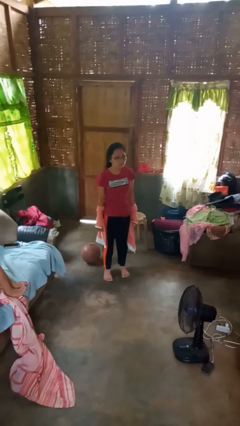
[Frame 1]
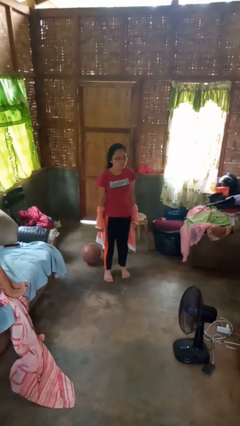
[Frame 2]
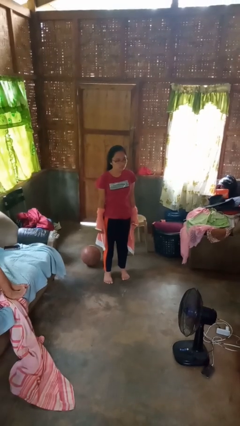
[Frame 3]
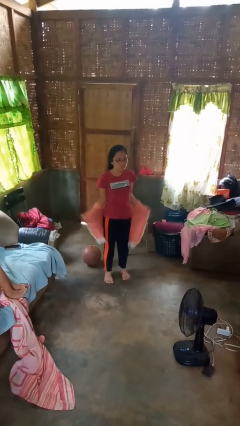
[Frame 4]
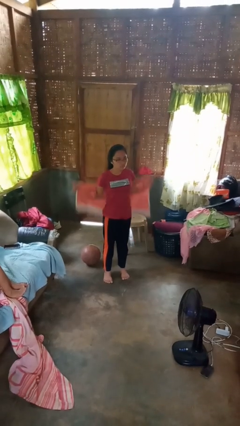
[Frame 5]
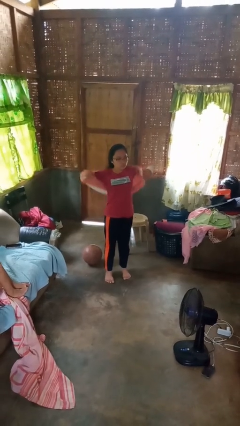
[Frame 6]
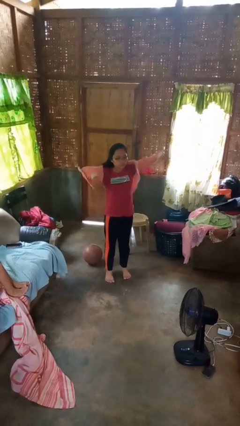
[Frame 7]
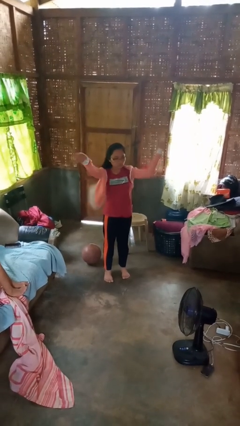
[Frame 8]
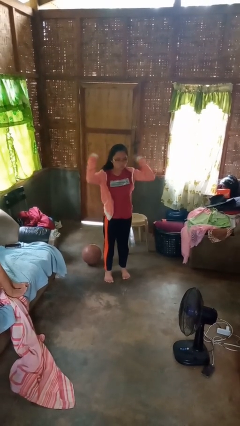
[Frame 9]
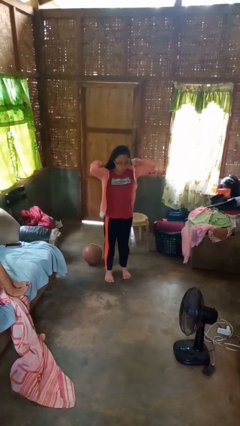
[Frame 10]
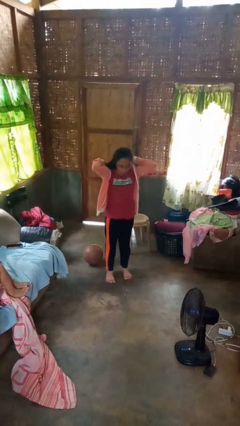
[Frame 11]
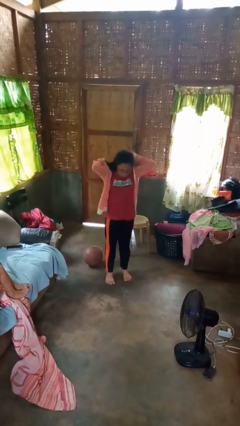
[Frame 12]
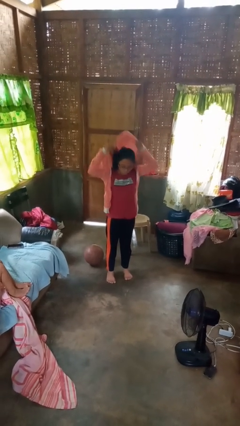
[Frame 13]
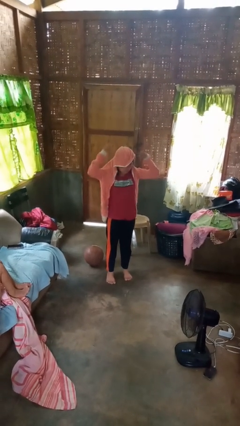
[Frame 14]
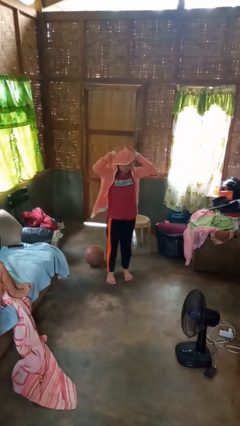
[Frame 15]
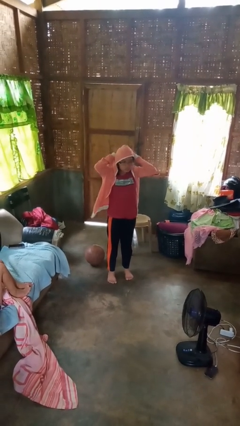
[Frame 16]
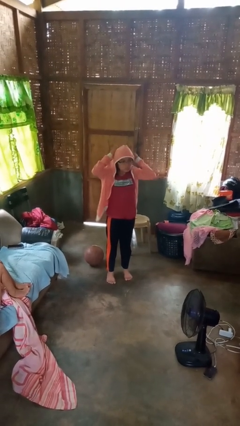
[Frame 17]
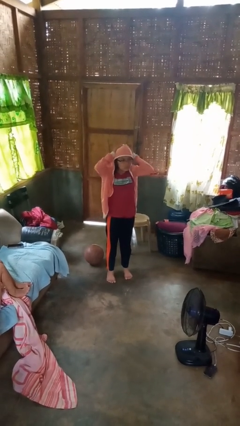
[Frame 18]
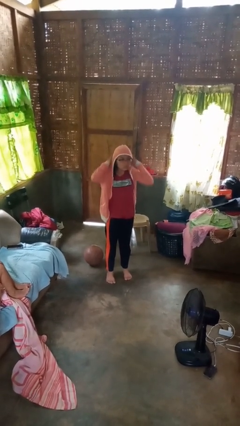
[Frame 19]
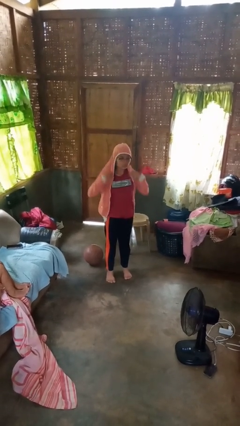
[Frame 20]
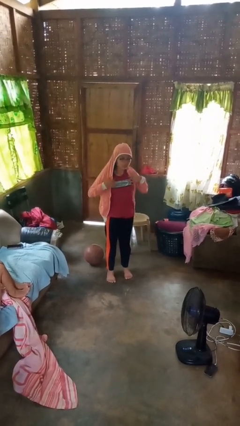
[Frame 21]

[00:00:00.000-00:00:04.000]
person puts on hoodie

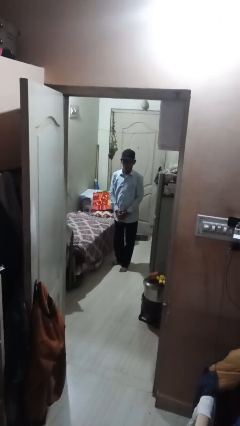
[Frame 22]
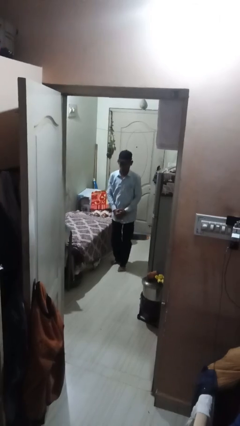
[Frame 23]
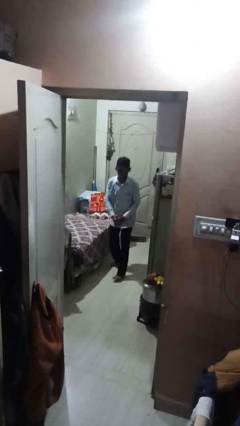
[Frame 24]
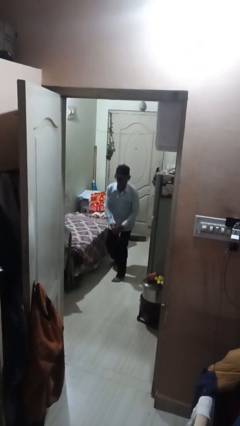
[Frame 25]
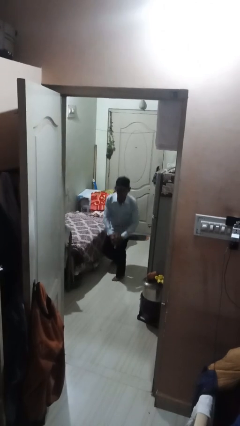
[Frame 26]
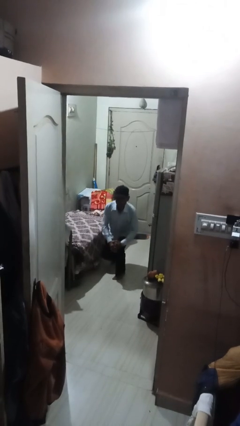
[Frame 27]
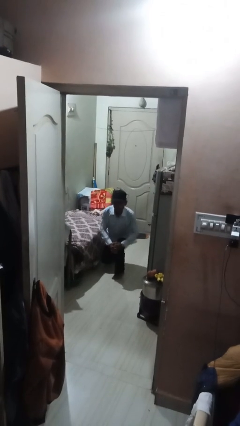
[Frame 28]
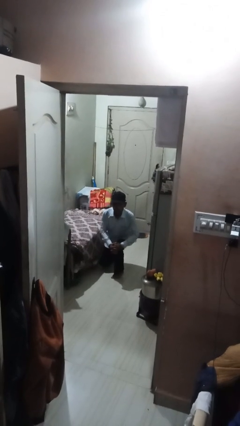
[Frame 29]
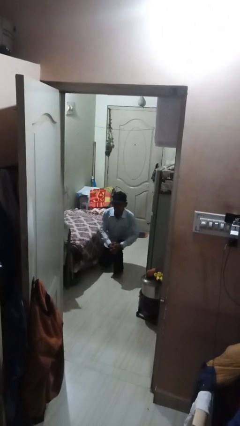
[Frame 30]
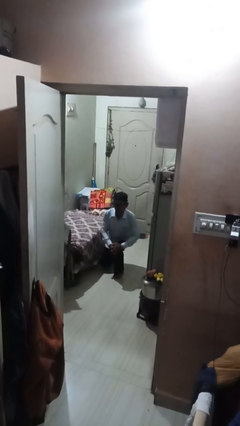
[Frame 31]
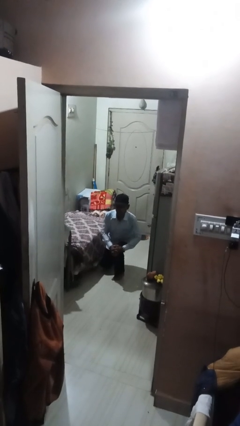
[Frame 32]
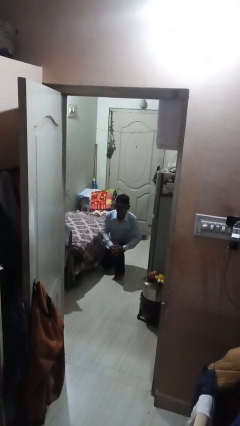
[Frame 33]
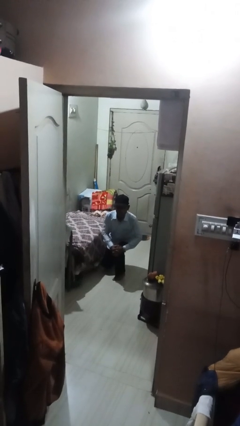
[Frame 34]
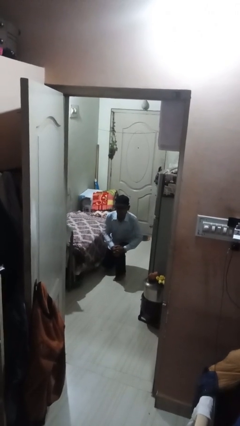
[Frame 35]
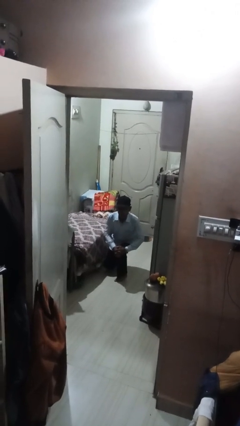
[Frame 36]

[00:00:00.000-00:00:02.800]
person exercises with lunges

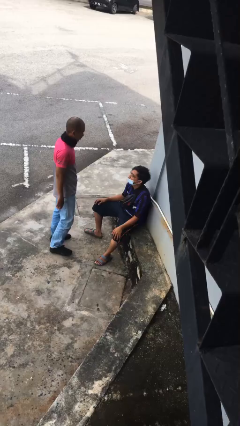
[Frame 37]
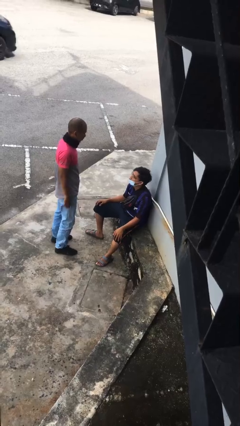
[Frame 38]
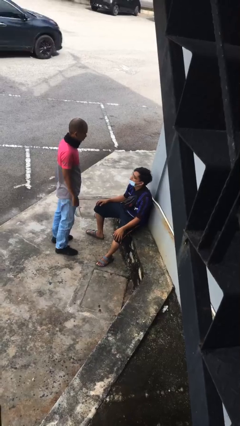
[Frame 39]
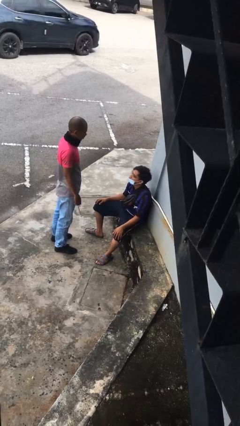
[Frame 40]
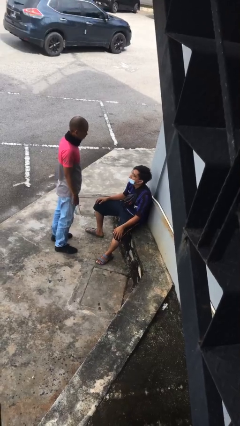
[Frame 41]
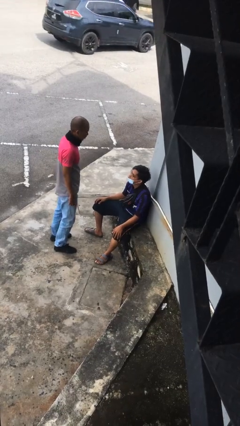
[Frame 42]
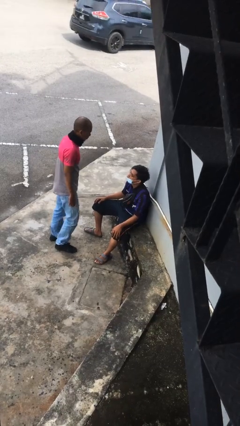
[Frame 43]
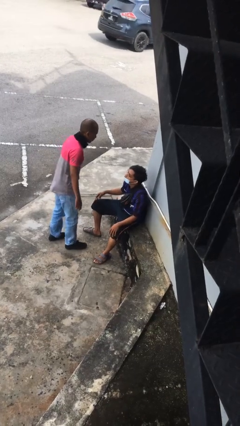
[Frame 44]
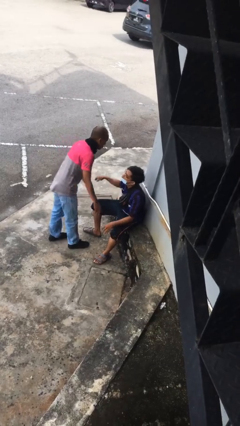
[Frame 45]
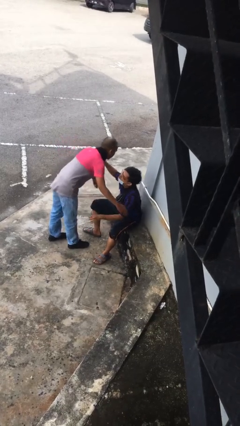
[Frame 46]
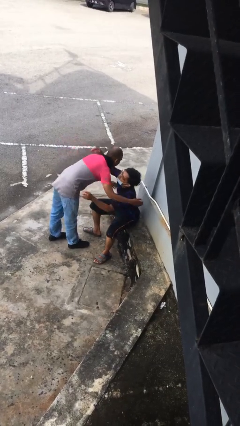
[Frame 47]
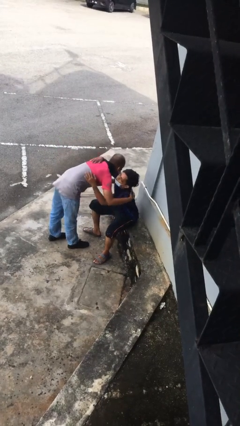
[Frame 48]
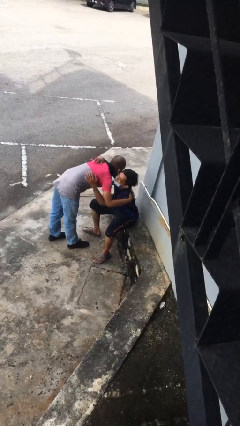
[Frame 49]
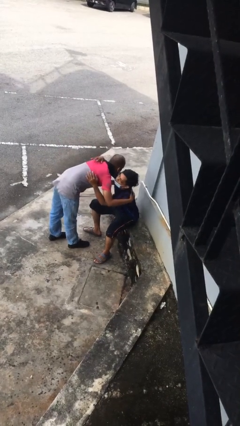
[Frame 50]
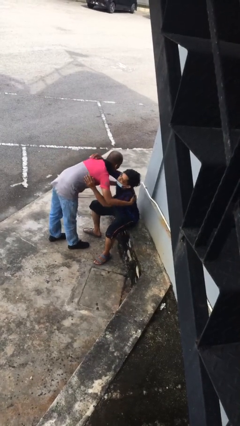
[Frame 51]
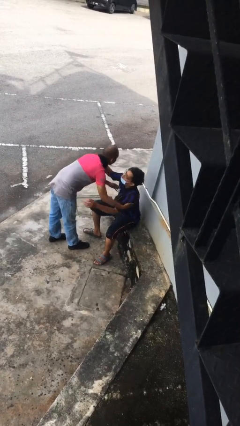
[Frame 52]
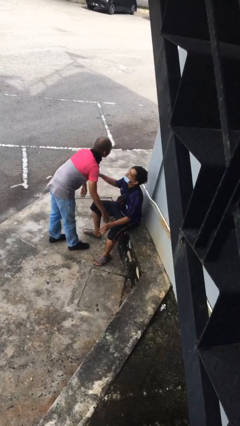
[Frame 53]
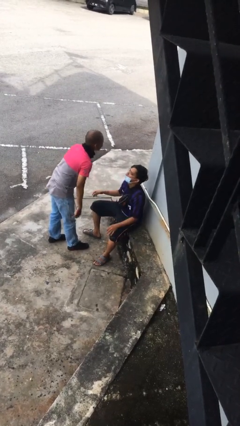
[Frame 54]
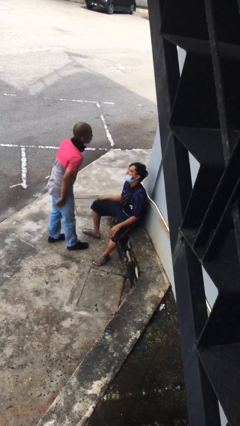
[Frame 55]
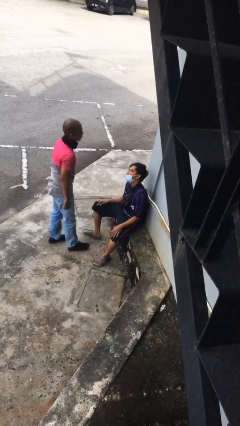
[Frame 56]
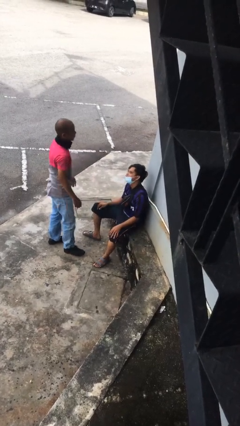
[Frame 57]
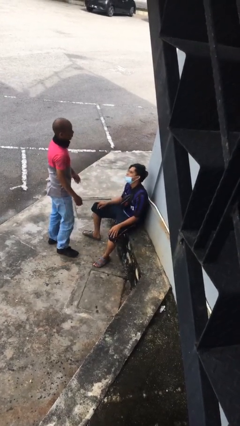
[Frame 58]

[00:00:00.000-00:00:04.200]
person embraces person

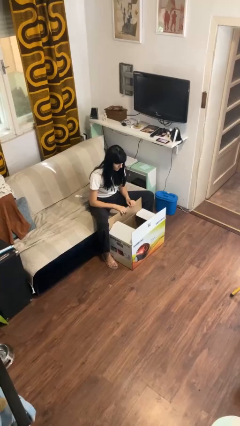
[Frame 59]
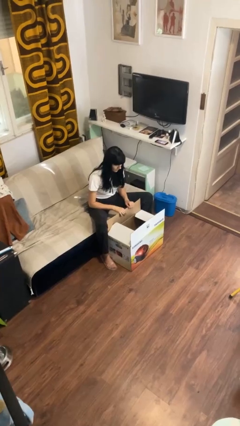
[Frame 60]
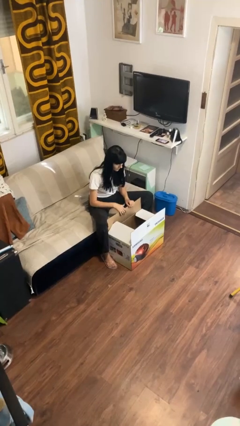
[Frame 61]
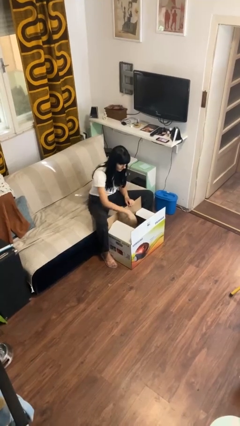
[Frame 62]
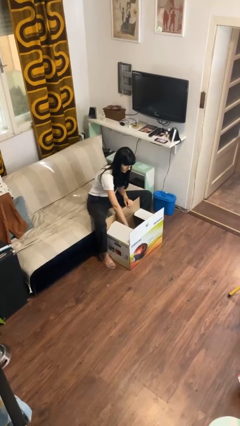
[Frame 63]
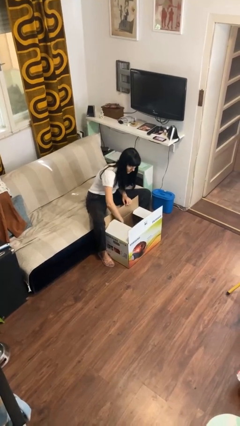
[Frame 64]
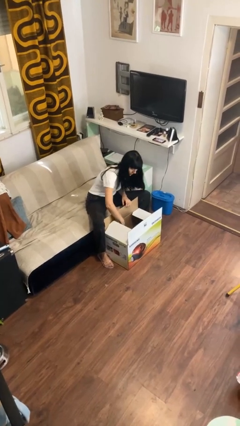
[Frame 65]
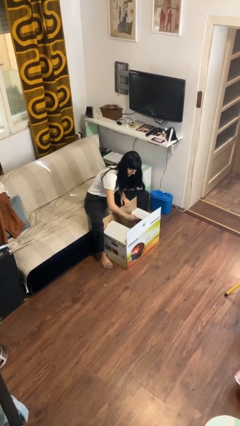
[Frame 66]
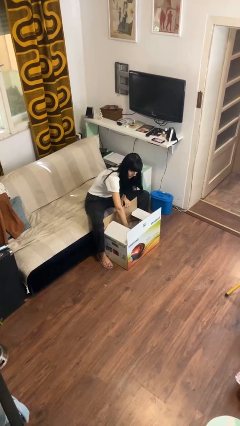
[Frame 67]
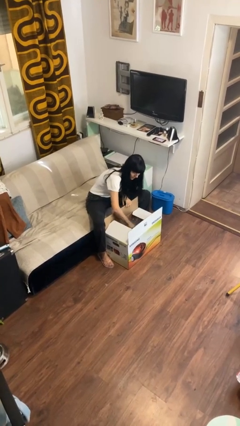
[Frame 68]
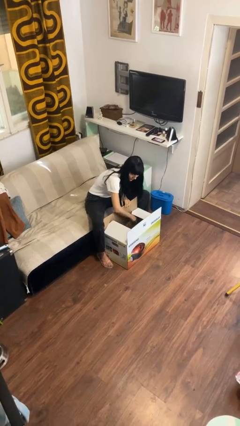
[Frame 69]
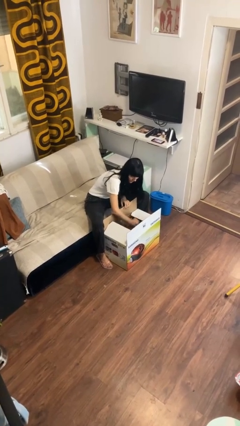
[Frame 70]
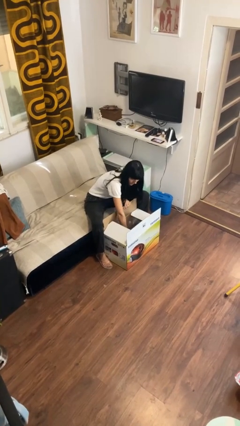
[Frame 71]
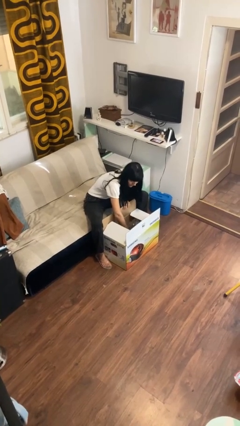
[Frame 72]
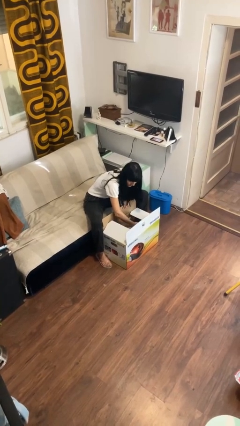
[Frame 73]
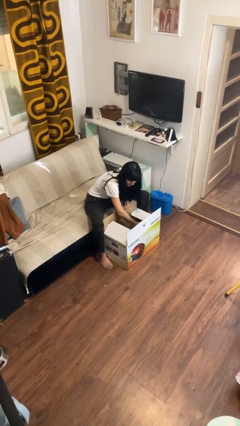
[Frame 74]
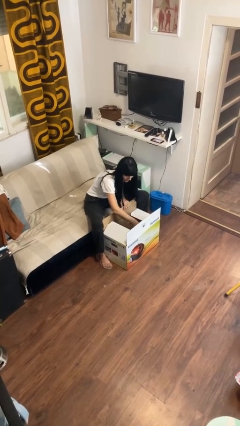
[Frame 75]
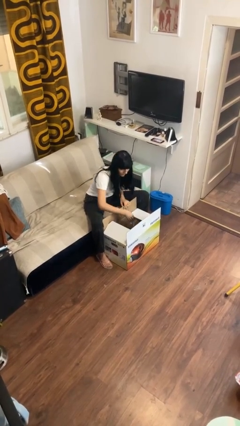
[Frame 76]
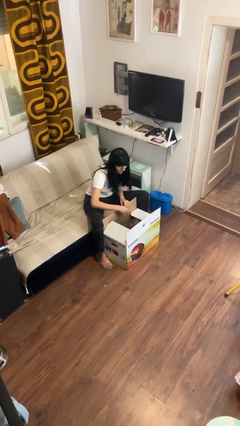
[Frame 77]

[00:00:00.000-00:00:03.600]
person searches in box

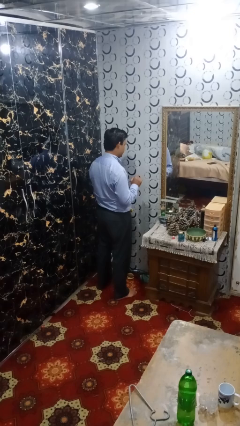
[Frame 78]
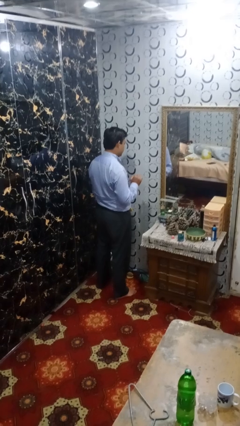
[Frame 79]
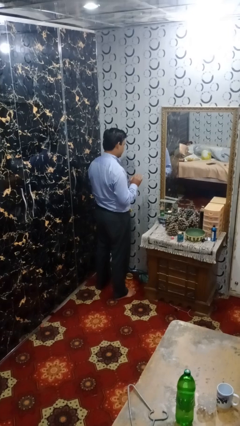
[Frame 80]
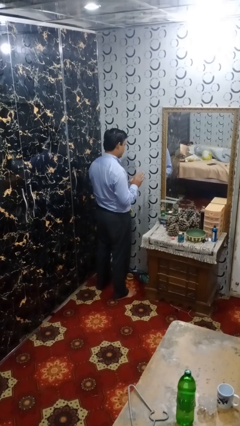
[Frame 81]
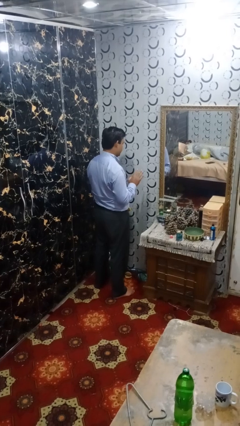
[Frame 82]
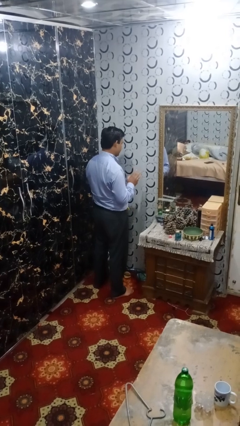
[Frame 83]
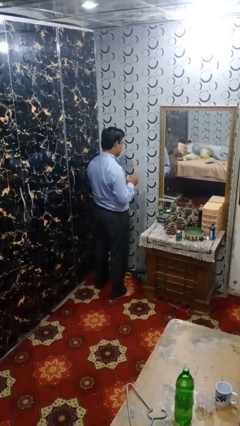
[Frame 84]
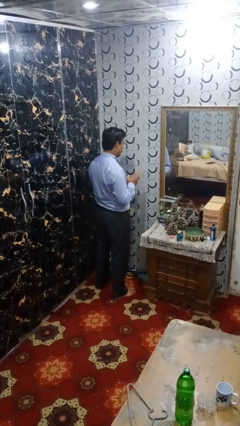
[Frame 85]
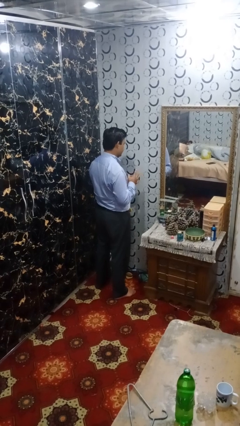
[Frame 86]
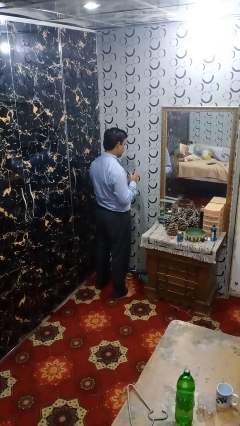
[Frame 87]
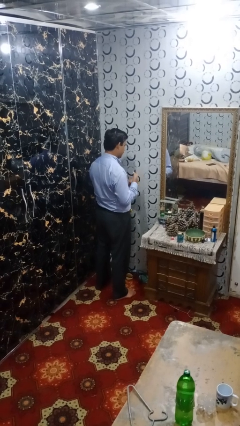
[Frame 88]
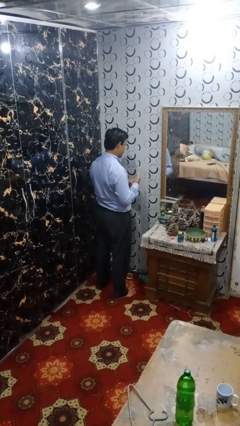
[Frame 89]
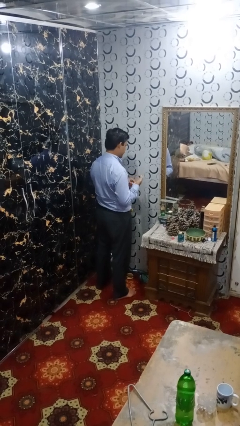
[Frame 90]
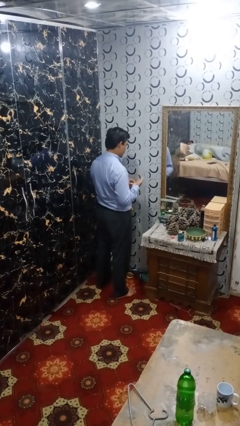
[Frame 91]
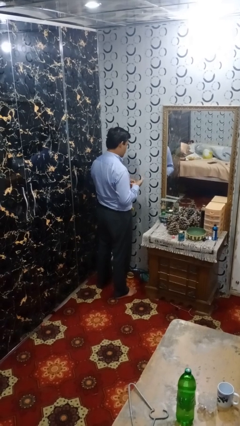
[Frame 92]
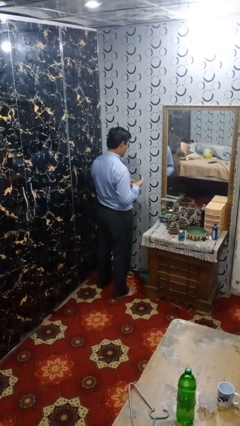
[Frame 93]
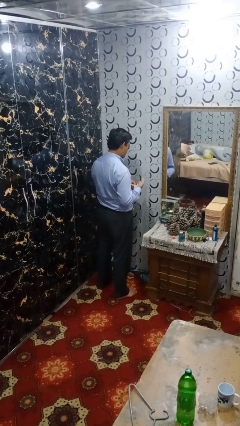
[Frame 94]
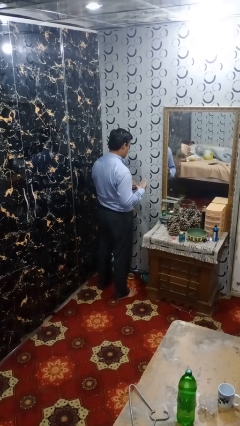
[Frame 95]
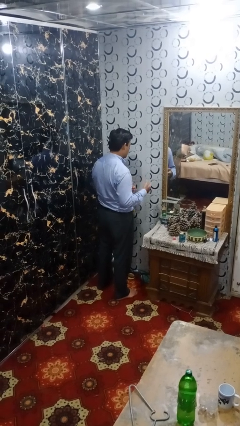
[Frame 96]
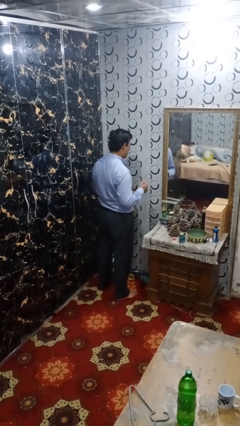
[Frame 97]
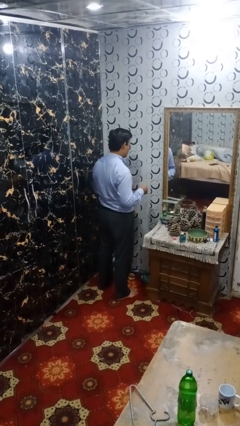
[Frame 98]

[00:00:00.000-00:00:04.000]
person takes off ring
